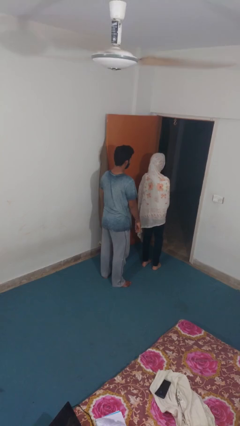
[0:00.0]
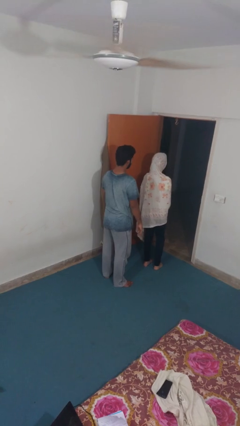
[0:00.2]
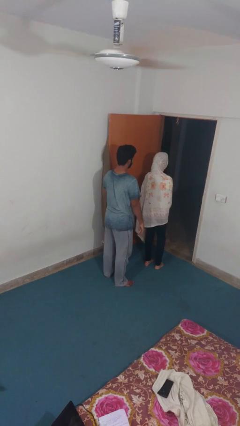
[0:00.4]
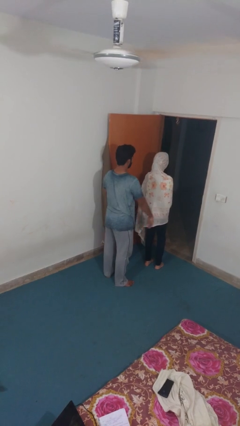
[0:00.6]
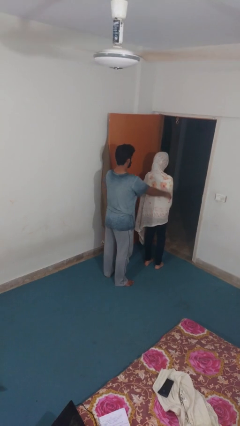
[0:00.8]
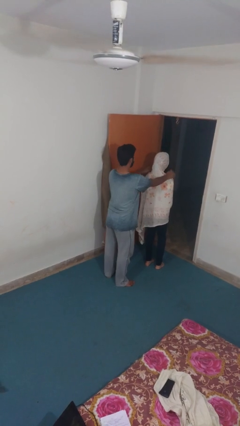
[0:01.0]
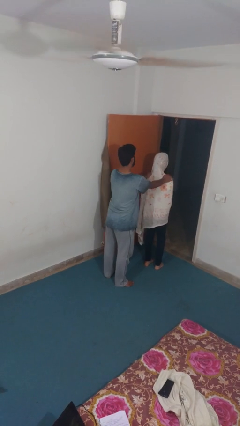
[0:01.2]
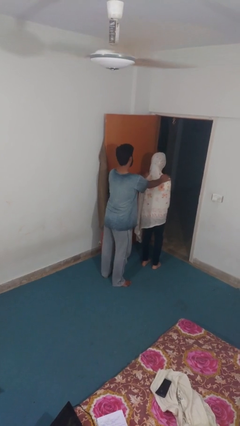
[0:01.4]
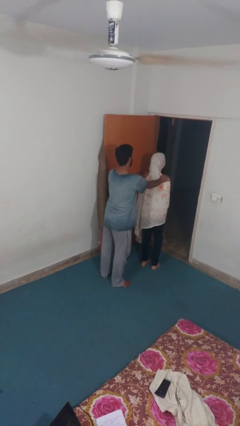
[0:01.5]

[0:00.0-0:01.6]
person grabs person by shoulder

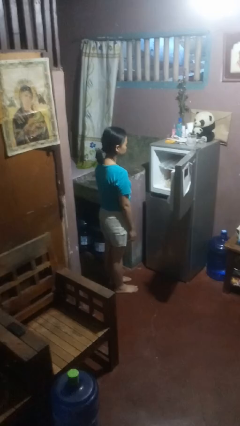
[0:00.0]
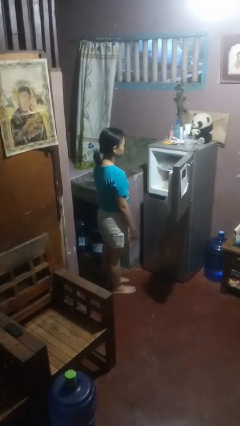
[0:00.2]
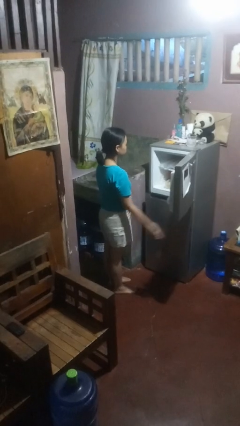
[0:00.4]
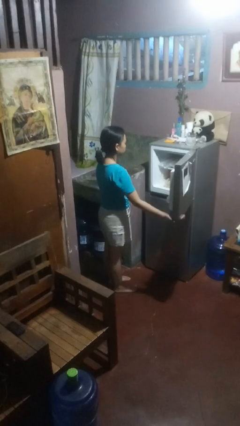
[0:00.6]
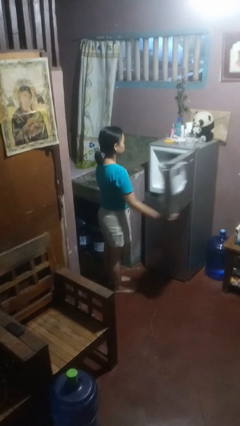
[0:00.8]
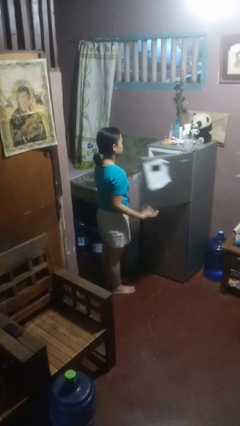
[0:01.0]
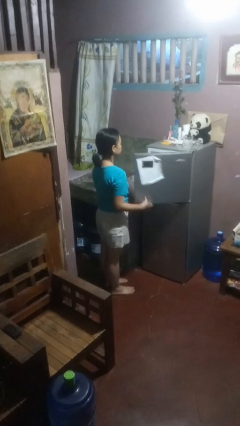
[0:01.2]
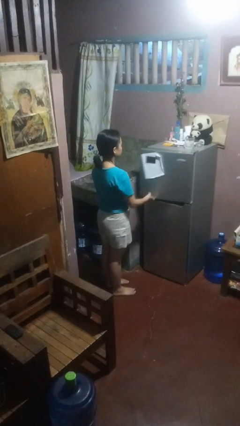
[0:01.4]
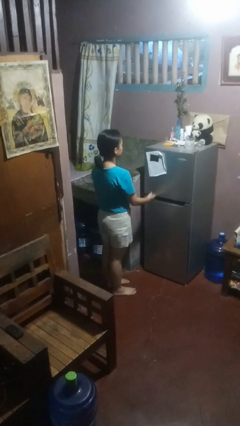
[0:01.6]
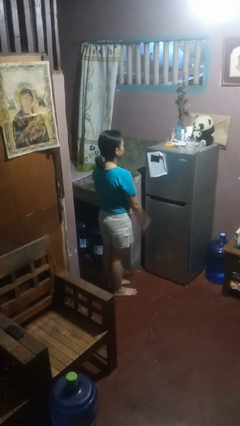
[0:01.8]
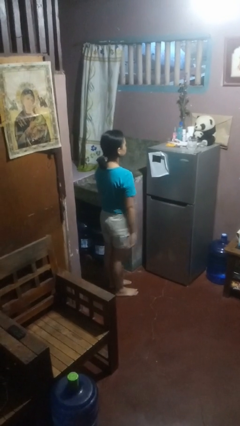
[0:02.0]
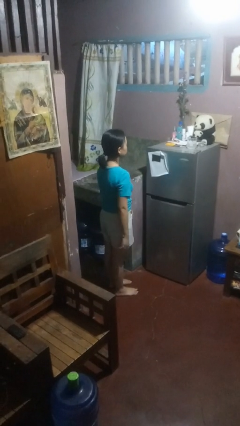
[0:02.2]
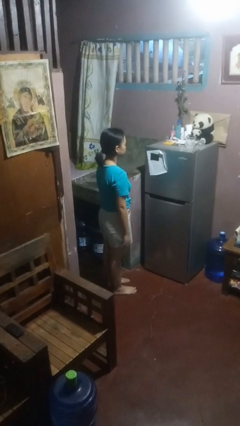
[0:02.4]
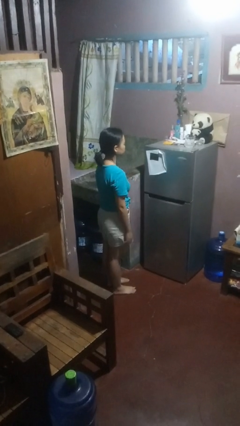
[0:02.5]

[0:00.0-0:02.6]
person closes refrigerator

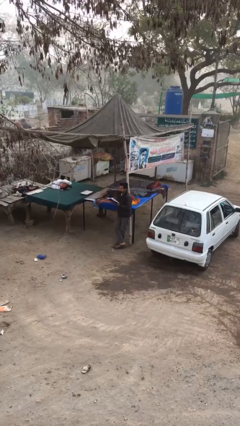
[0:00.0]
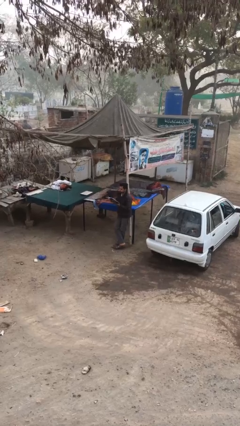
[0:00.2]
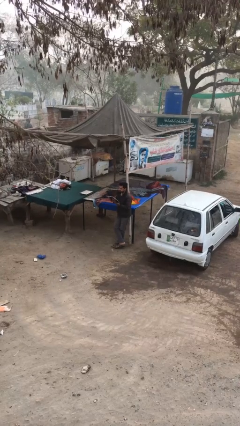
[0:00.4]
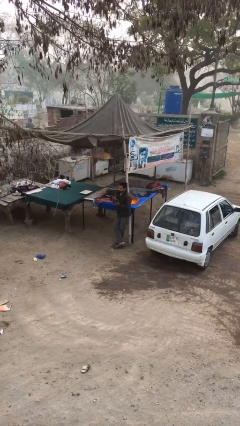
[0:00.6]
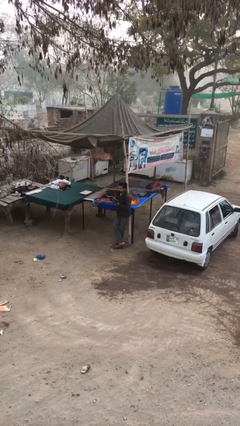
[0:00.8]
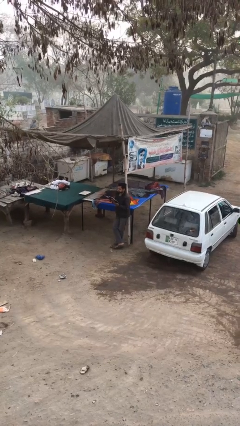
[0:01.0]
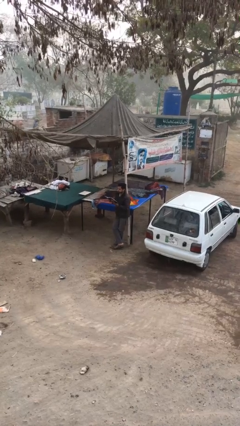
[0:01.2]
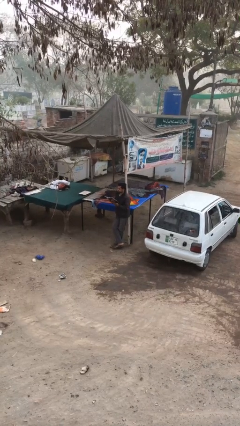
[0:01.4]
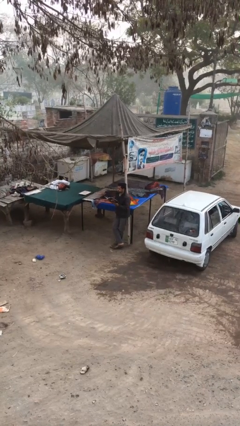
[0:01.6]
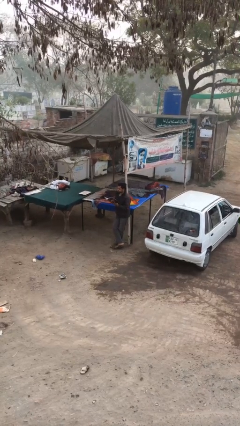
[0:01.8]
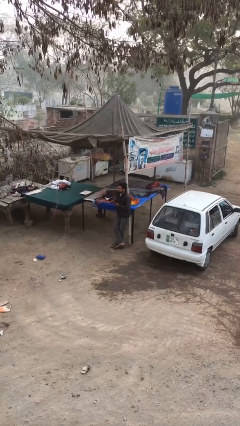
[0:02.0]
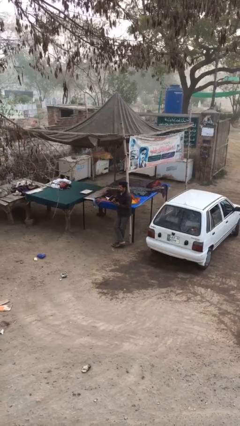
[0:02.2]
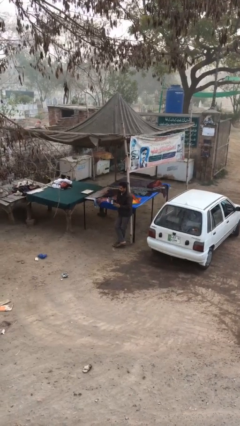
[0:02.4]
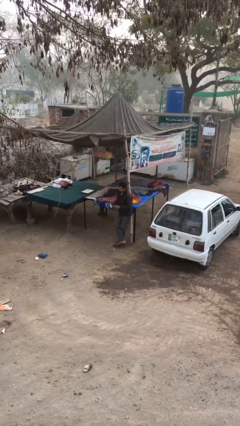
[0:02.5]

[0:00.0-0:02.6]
person reads document

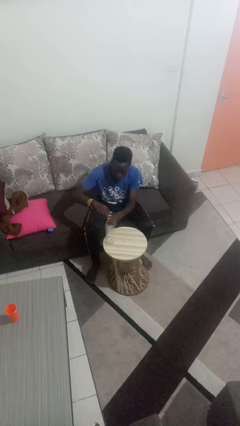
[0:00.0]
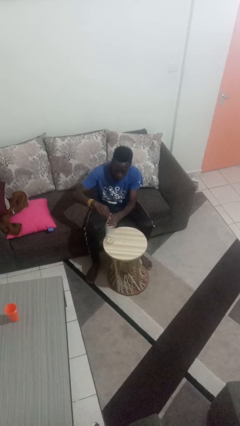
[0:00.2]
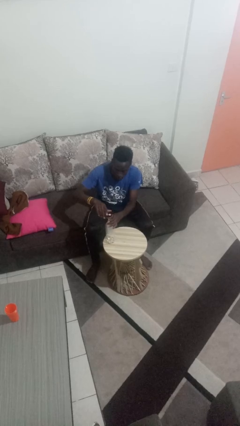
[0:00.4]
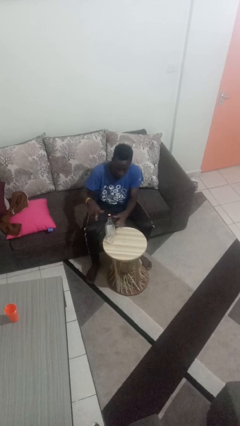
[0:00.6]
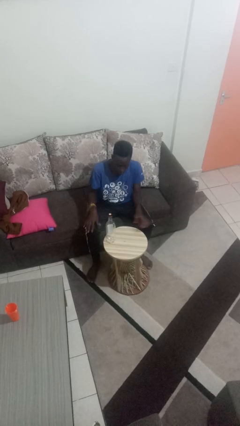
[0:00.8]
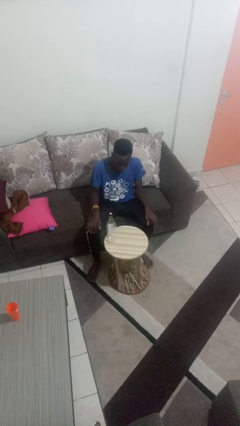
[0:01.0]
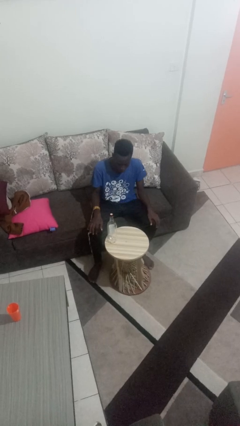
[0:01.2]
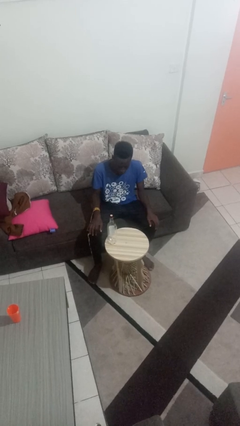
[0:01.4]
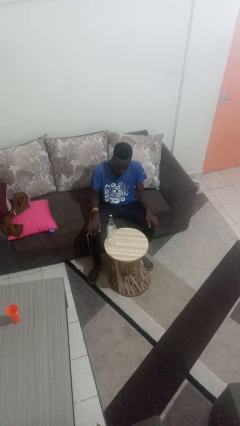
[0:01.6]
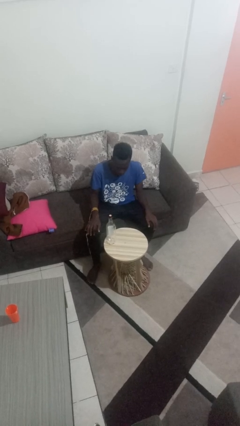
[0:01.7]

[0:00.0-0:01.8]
person screws lid to bottle

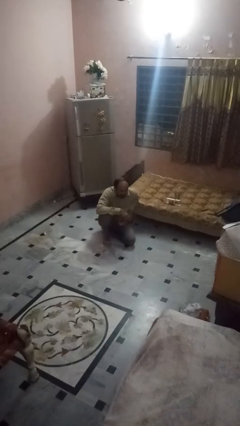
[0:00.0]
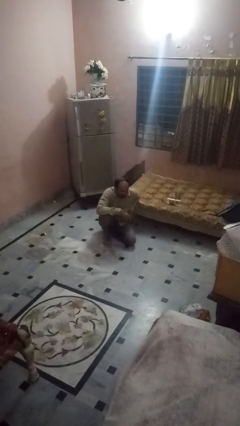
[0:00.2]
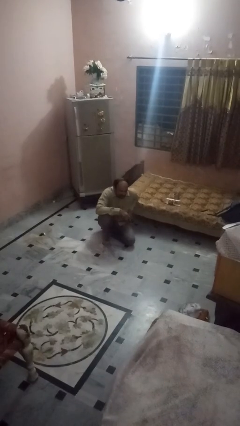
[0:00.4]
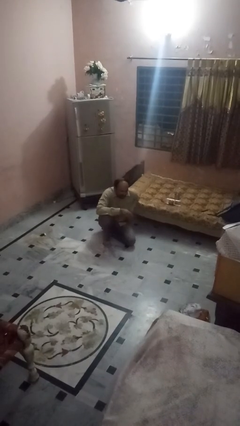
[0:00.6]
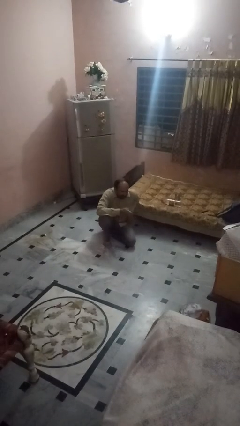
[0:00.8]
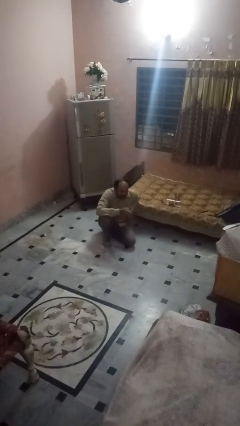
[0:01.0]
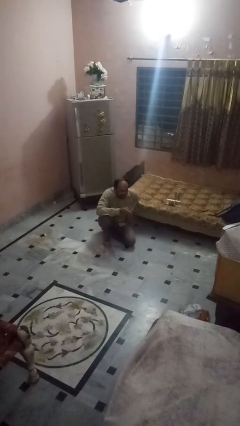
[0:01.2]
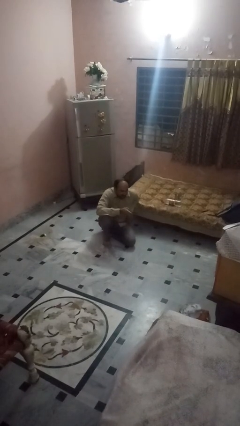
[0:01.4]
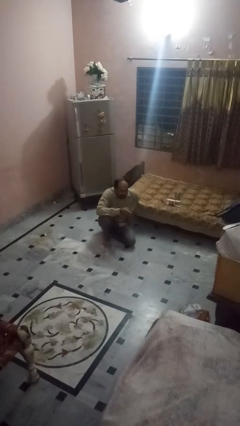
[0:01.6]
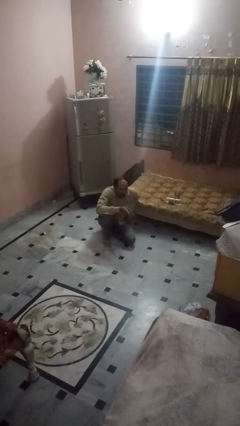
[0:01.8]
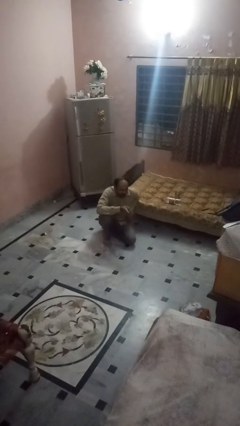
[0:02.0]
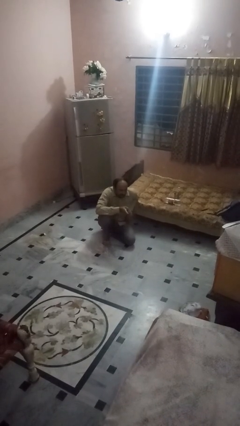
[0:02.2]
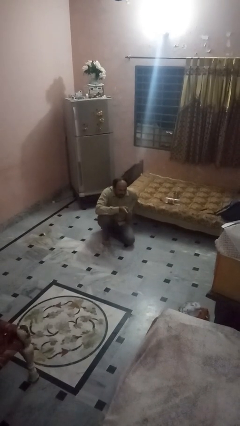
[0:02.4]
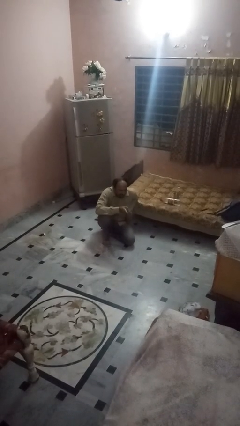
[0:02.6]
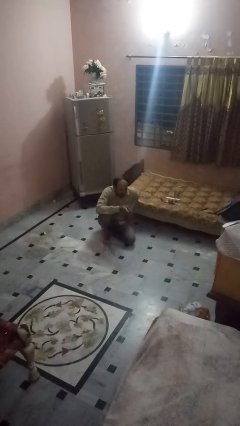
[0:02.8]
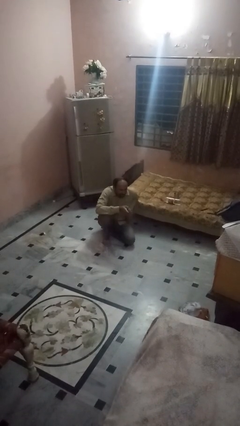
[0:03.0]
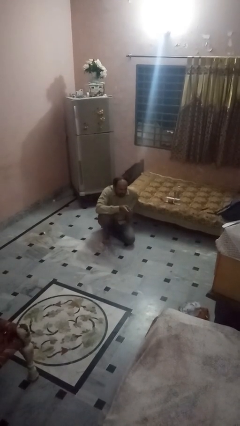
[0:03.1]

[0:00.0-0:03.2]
person uses television remote

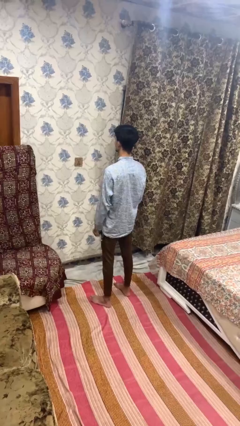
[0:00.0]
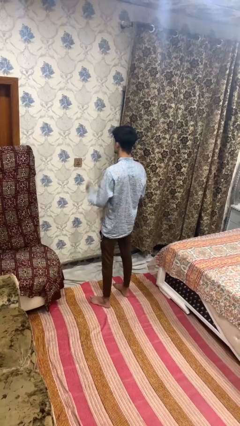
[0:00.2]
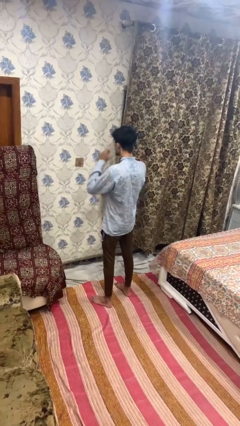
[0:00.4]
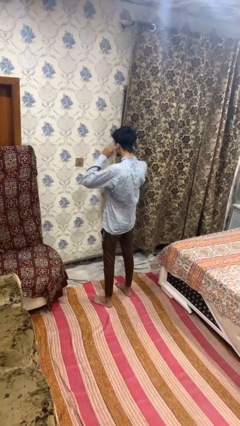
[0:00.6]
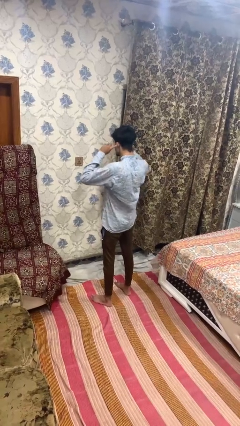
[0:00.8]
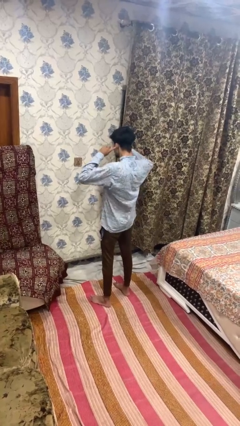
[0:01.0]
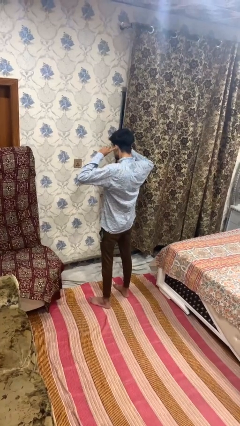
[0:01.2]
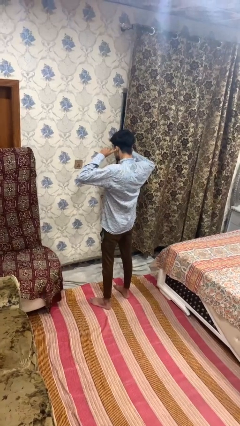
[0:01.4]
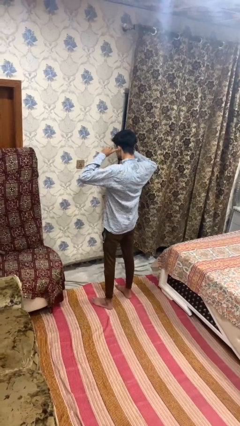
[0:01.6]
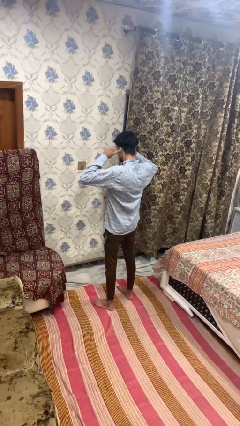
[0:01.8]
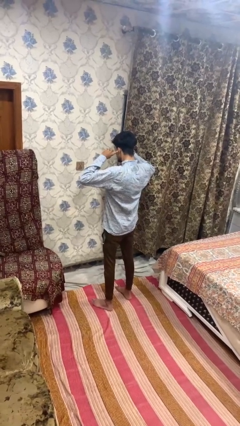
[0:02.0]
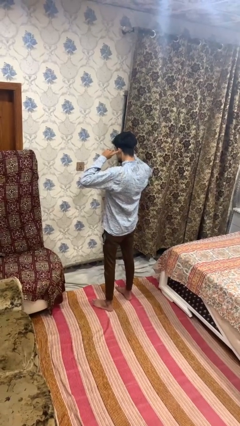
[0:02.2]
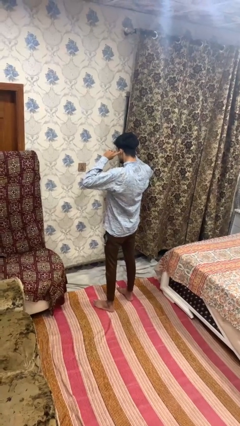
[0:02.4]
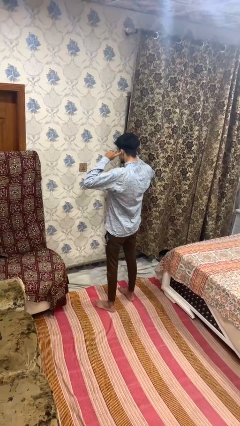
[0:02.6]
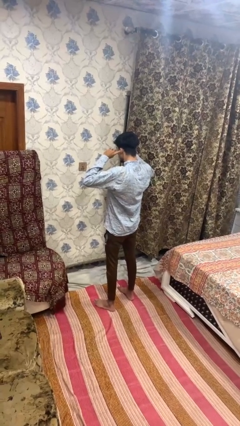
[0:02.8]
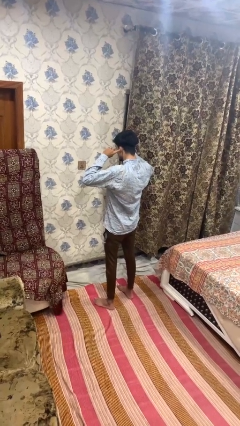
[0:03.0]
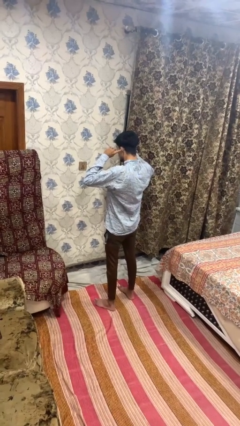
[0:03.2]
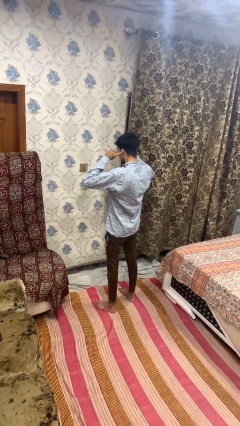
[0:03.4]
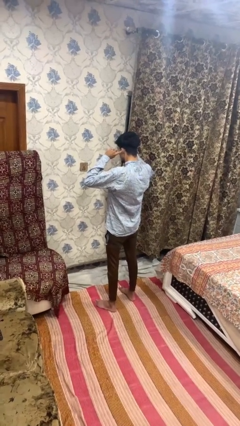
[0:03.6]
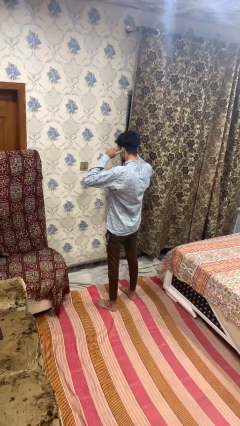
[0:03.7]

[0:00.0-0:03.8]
person puts fingers in ear

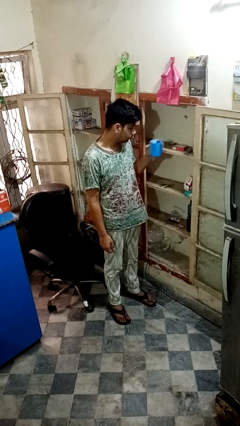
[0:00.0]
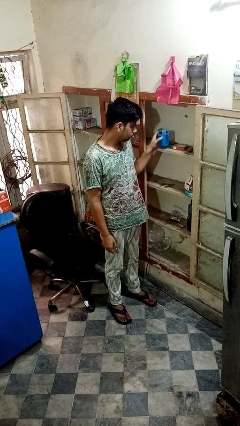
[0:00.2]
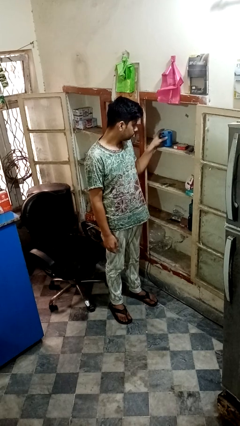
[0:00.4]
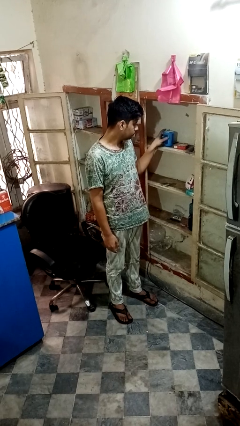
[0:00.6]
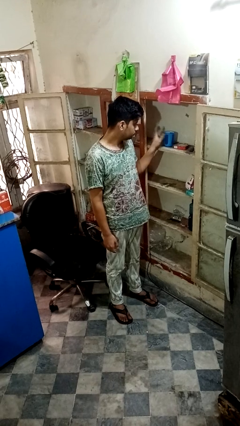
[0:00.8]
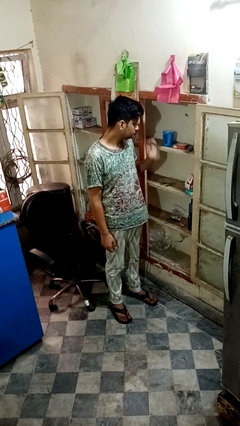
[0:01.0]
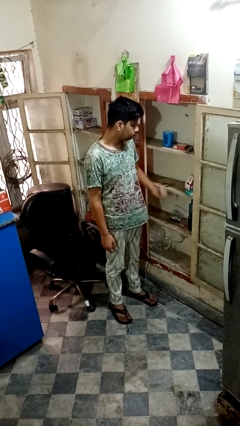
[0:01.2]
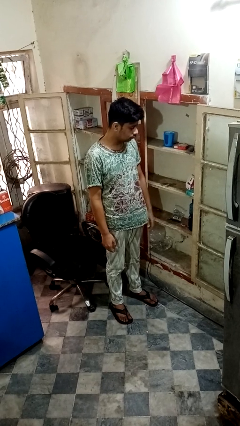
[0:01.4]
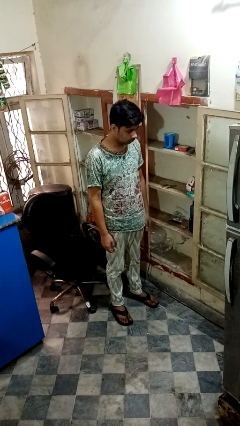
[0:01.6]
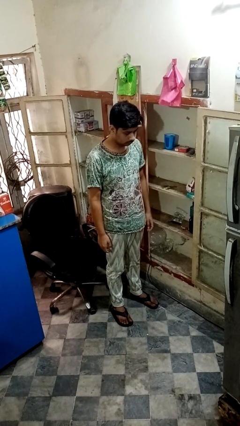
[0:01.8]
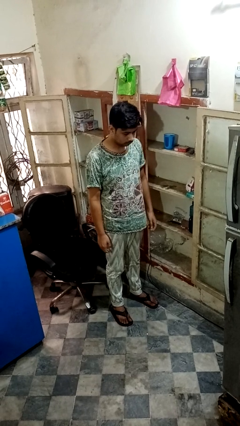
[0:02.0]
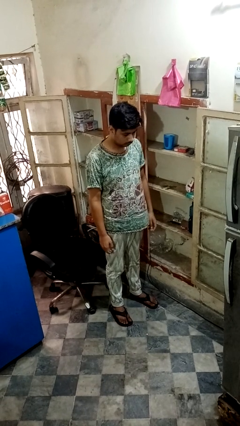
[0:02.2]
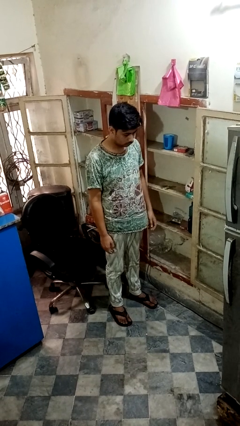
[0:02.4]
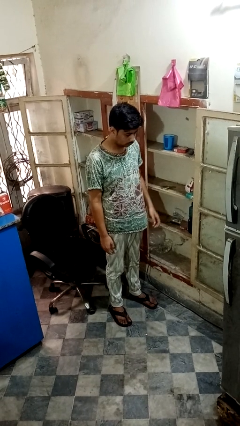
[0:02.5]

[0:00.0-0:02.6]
person puts object in cabinet
